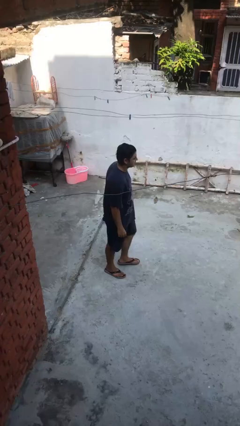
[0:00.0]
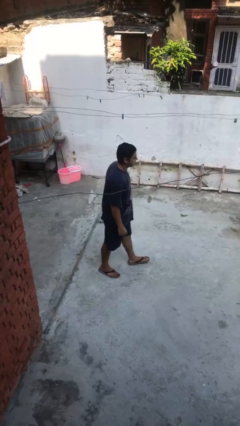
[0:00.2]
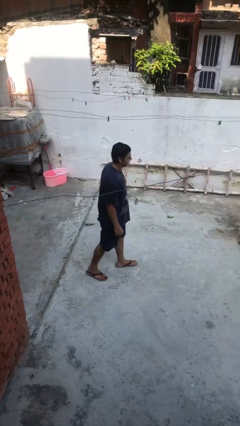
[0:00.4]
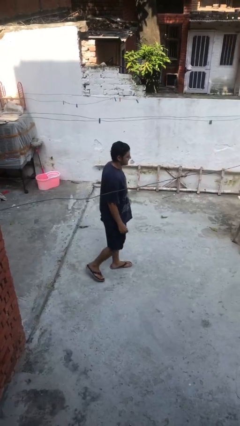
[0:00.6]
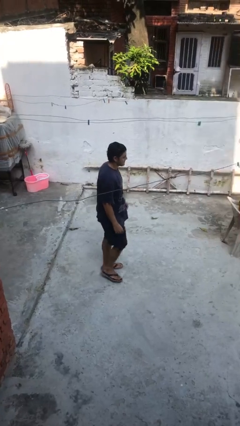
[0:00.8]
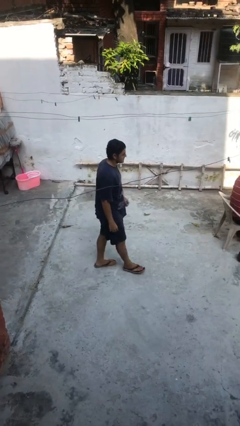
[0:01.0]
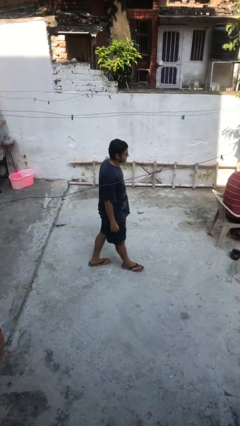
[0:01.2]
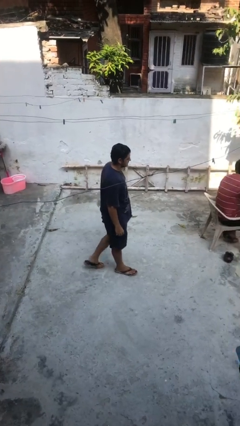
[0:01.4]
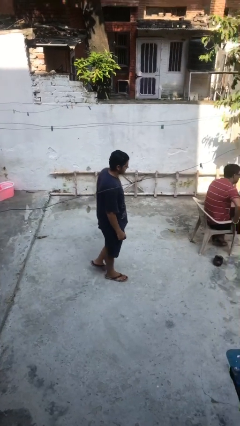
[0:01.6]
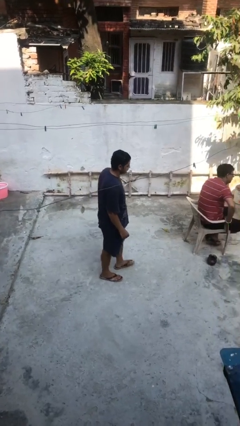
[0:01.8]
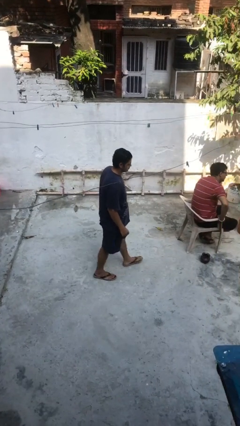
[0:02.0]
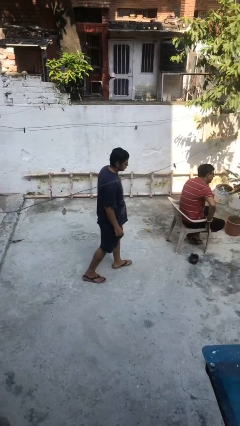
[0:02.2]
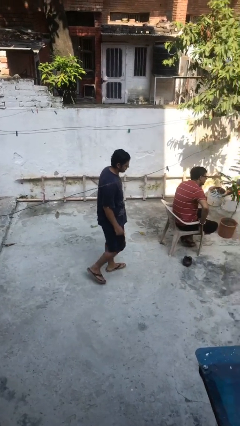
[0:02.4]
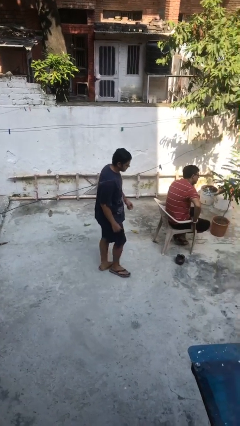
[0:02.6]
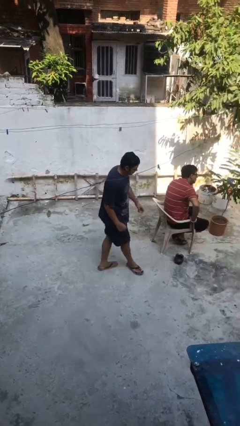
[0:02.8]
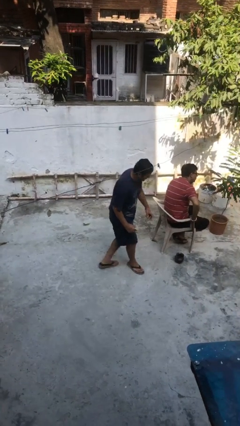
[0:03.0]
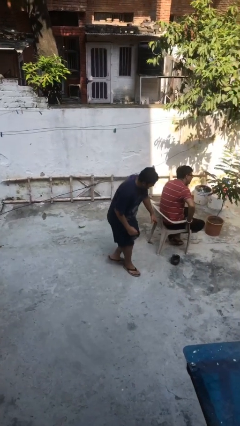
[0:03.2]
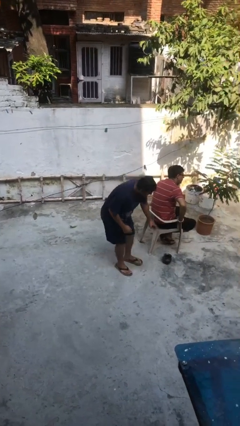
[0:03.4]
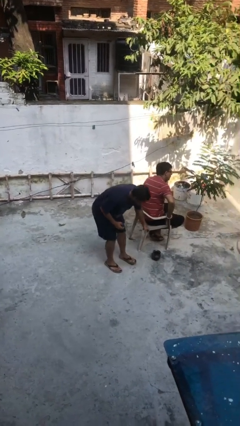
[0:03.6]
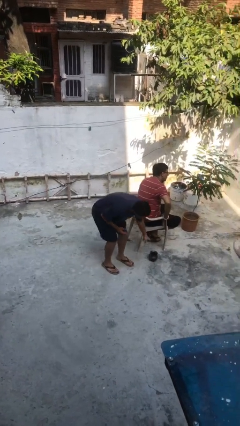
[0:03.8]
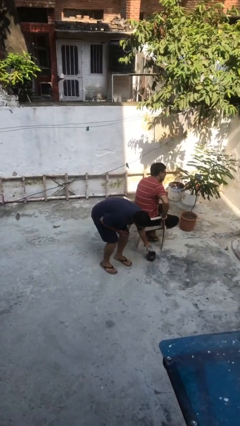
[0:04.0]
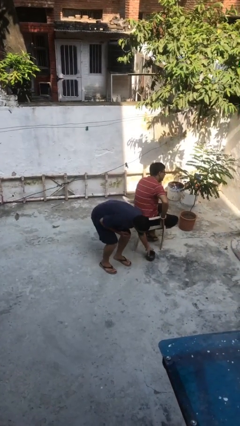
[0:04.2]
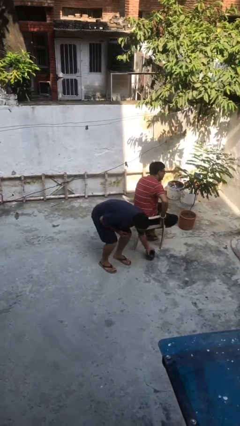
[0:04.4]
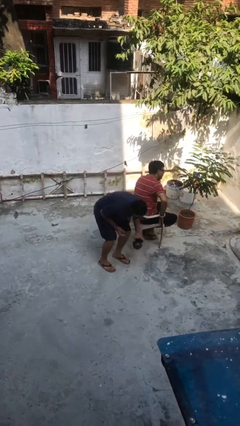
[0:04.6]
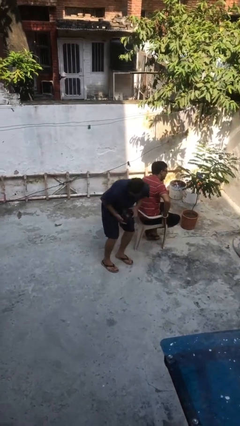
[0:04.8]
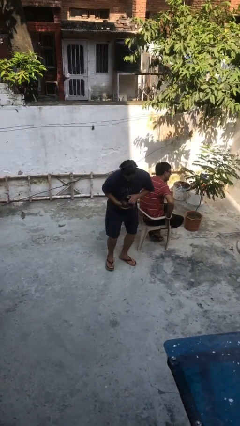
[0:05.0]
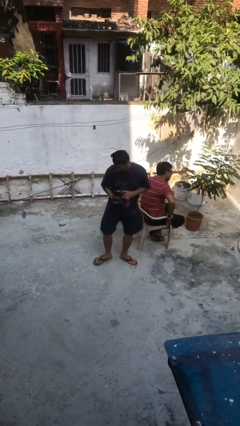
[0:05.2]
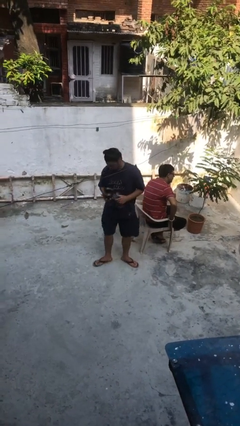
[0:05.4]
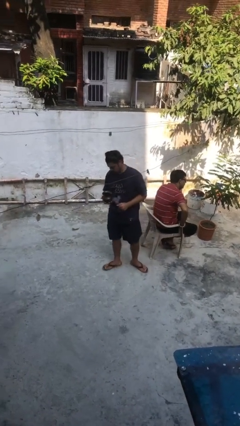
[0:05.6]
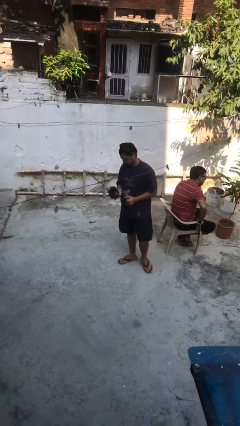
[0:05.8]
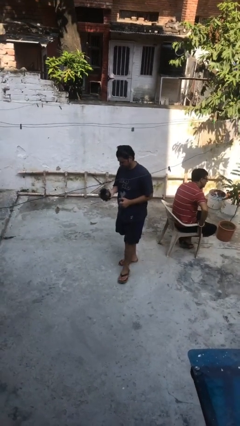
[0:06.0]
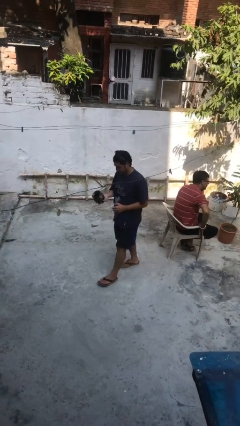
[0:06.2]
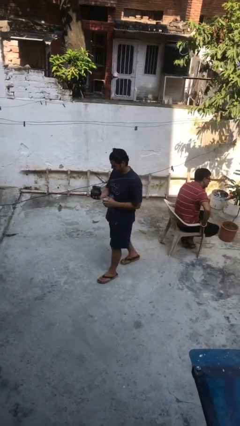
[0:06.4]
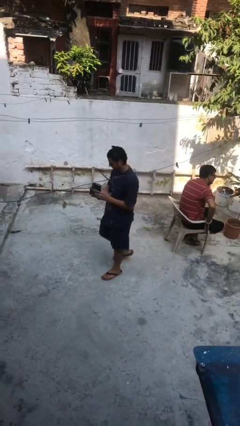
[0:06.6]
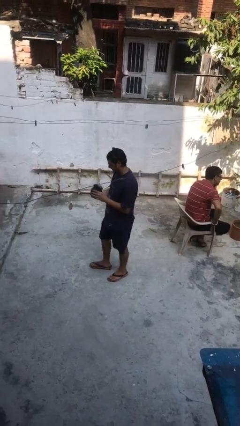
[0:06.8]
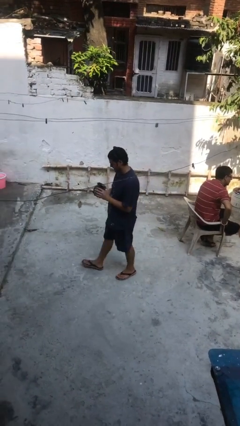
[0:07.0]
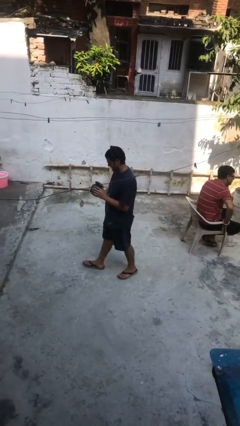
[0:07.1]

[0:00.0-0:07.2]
person steals object from person

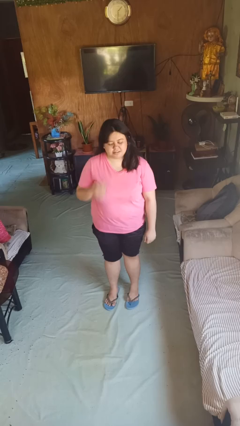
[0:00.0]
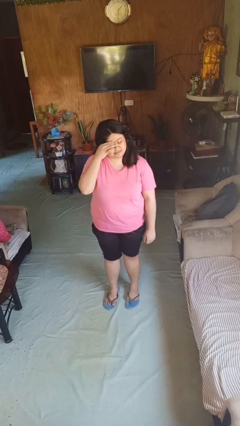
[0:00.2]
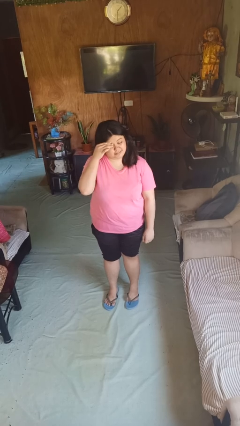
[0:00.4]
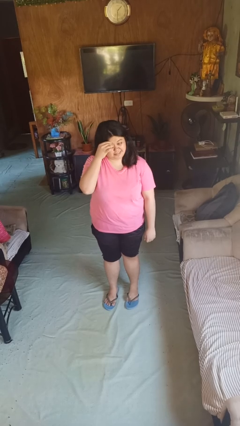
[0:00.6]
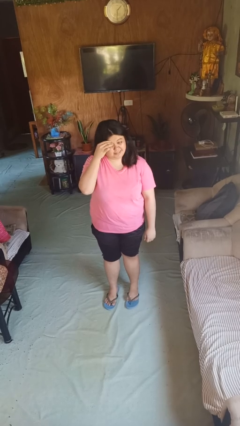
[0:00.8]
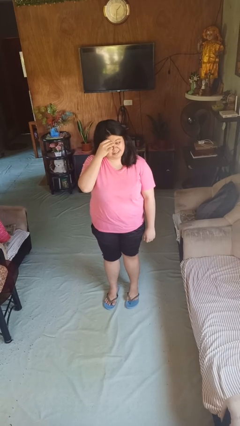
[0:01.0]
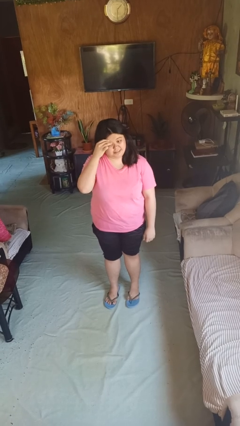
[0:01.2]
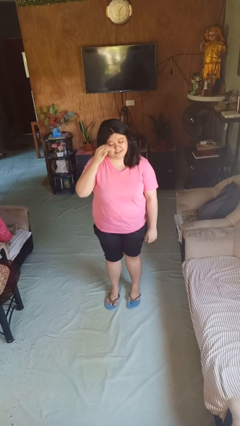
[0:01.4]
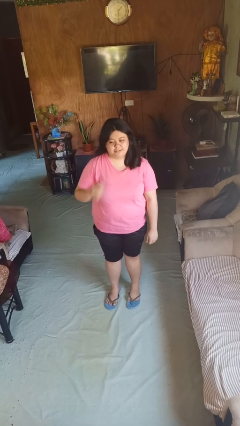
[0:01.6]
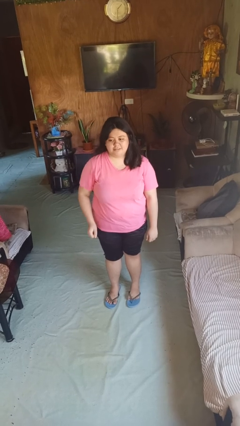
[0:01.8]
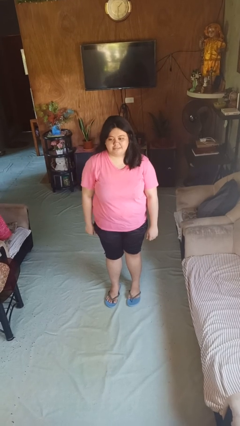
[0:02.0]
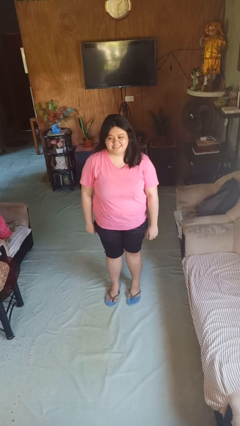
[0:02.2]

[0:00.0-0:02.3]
person scratches face

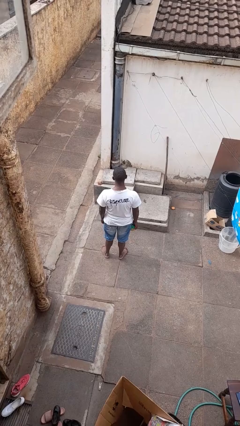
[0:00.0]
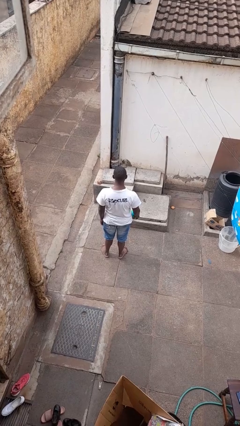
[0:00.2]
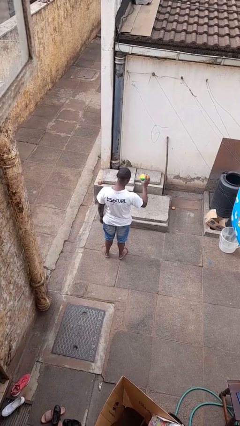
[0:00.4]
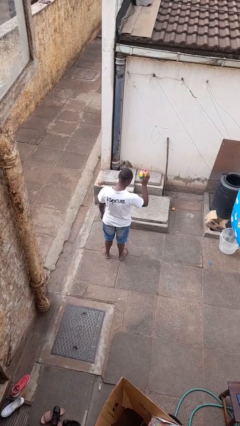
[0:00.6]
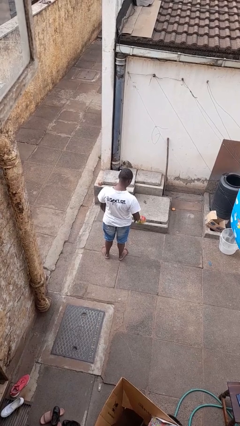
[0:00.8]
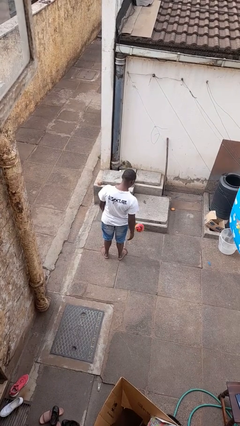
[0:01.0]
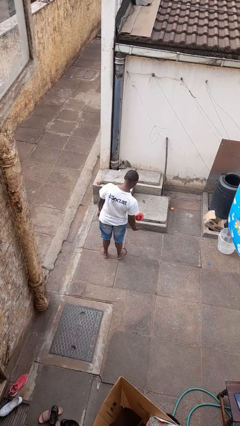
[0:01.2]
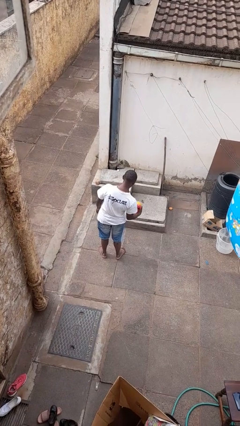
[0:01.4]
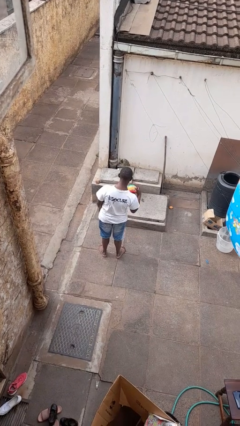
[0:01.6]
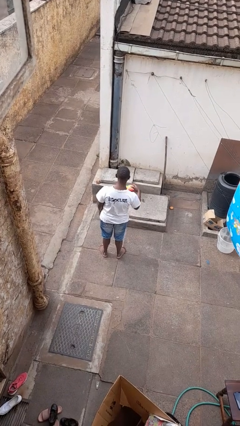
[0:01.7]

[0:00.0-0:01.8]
person bounces ball on floor

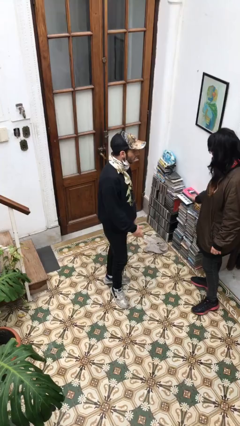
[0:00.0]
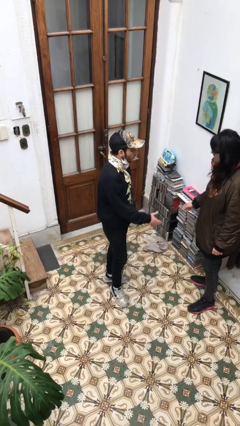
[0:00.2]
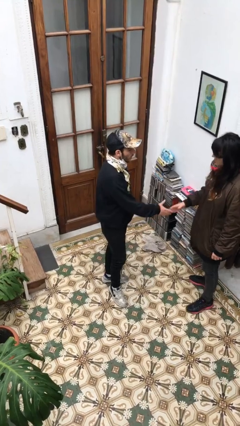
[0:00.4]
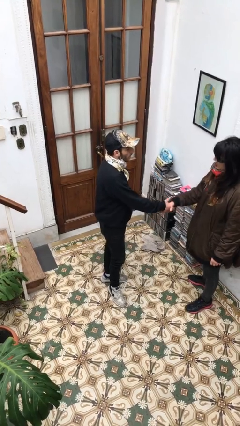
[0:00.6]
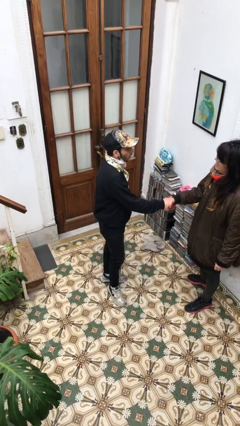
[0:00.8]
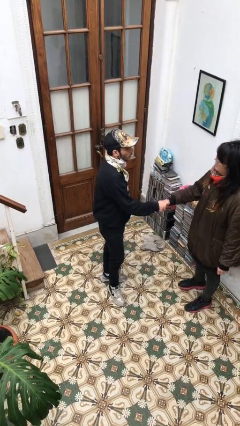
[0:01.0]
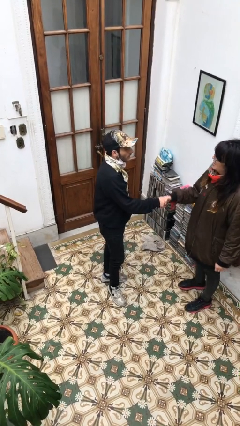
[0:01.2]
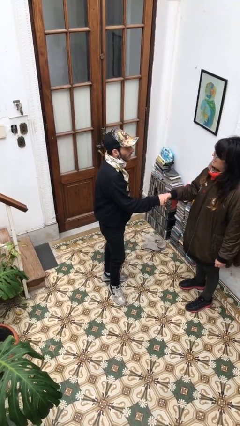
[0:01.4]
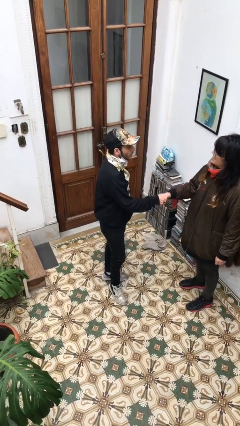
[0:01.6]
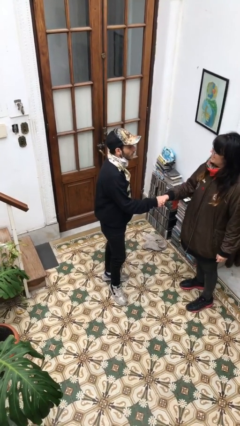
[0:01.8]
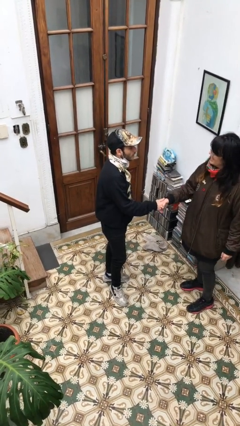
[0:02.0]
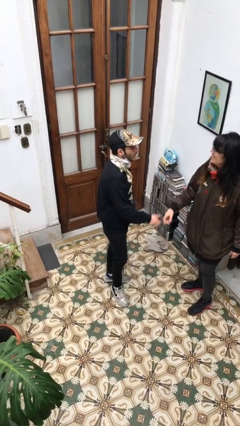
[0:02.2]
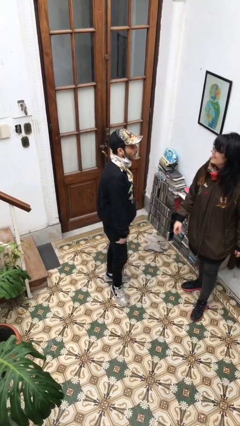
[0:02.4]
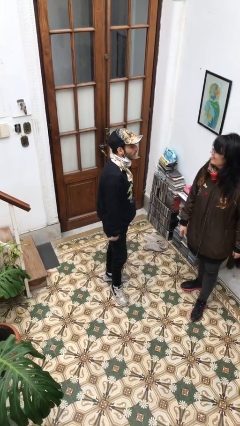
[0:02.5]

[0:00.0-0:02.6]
person shakes hand

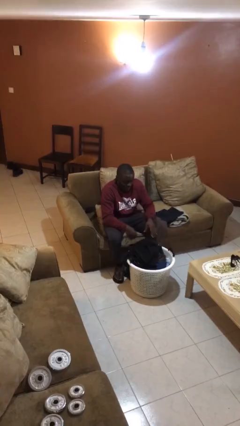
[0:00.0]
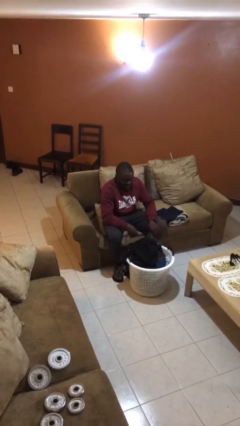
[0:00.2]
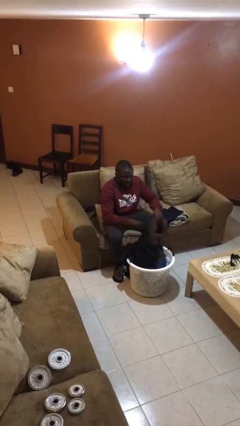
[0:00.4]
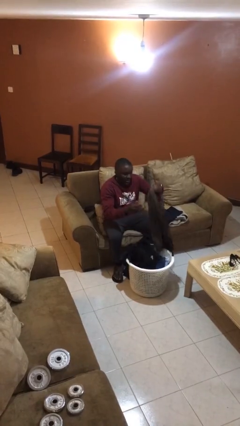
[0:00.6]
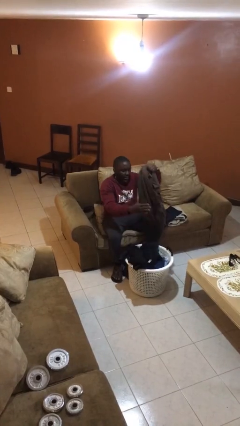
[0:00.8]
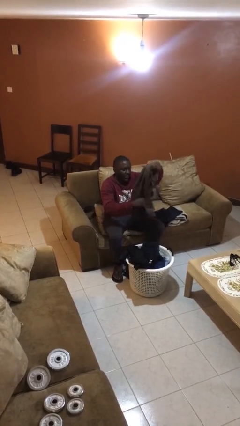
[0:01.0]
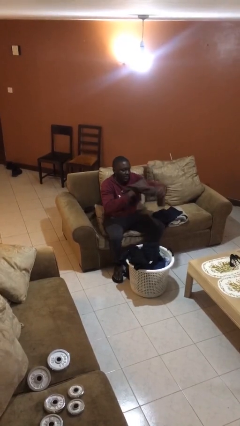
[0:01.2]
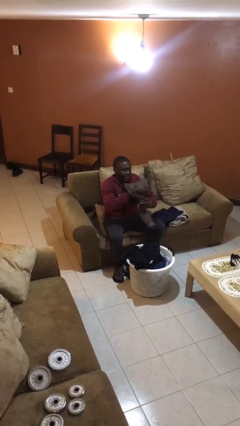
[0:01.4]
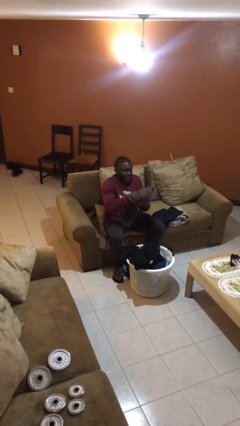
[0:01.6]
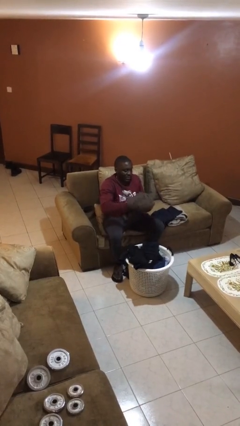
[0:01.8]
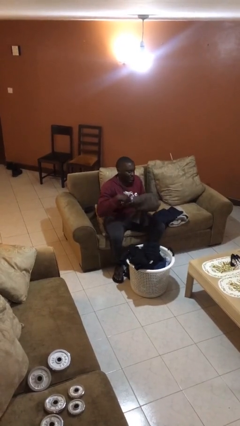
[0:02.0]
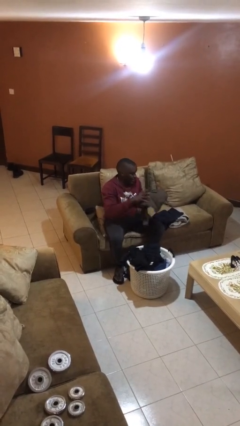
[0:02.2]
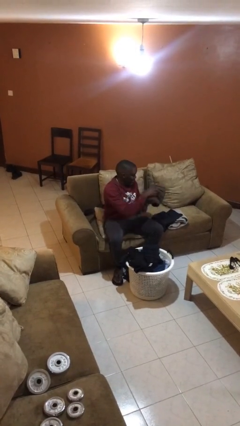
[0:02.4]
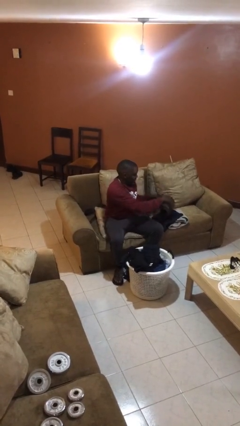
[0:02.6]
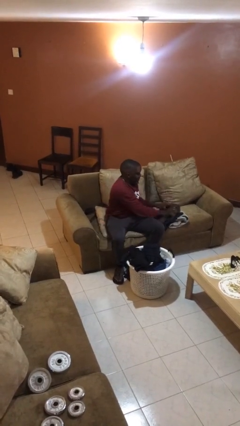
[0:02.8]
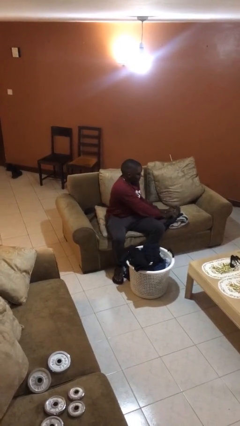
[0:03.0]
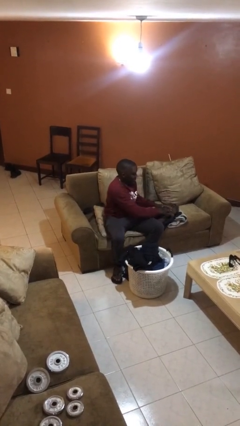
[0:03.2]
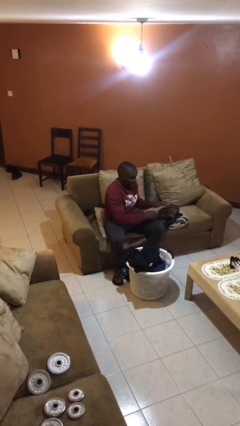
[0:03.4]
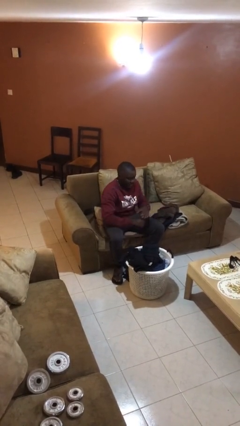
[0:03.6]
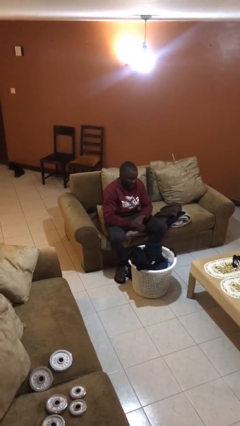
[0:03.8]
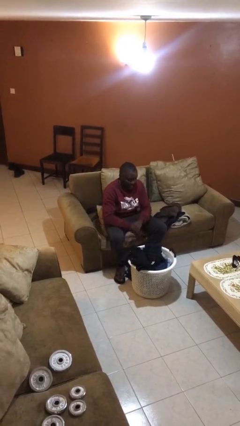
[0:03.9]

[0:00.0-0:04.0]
person folds pants
